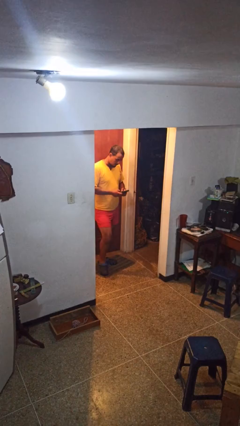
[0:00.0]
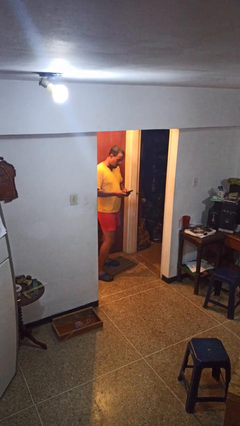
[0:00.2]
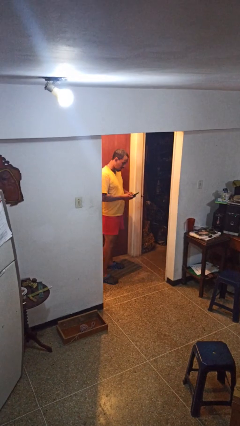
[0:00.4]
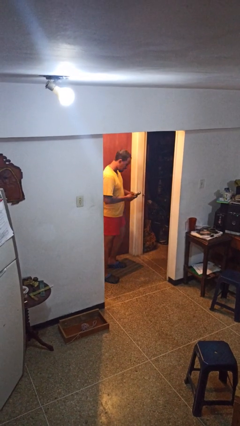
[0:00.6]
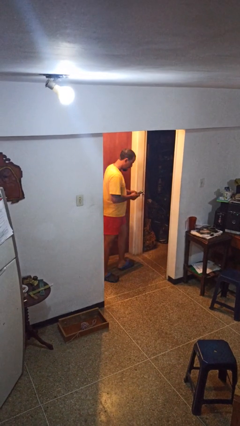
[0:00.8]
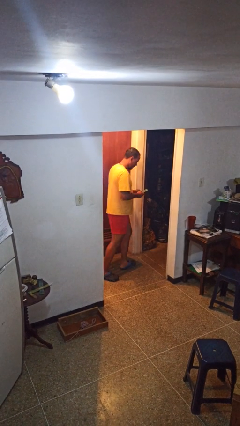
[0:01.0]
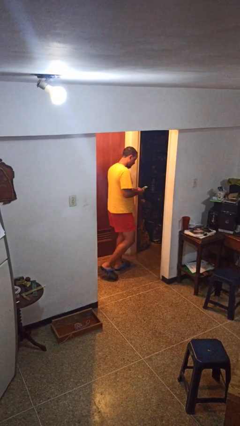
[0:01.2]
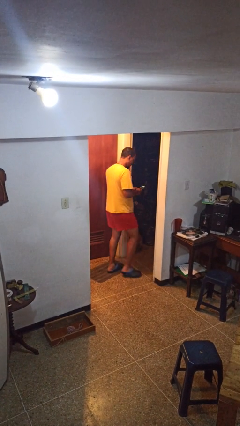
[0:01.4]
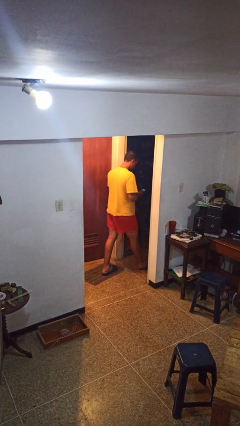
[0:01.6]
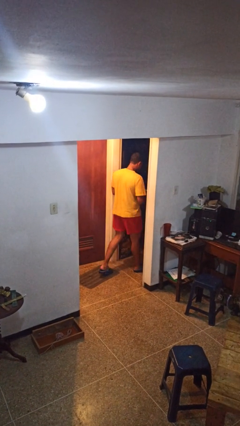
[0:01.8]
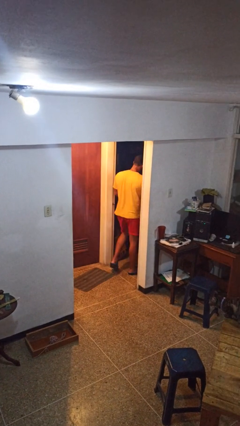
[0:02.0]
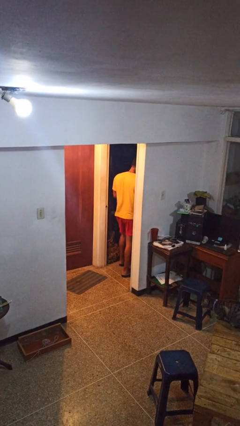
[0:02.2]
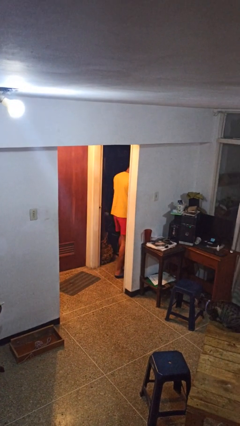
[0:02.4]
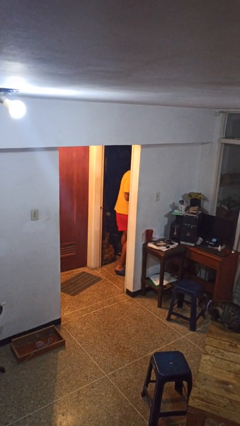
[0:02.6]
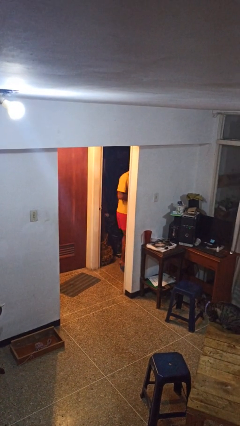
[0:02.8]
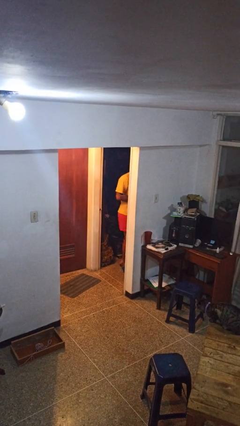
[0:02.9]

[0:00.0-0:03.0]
person exits scene through structure

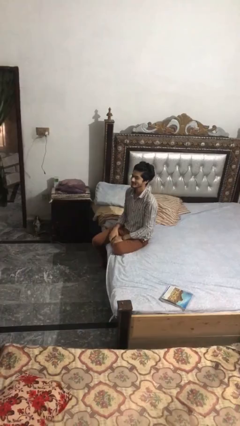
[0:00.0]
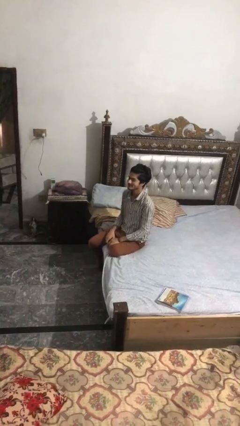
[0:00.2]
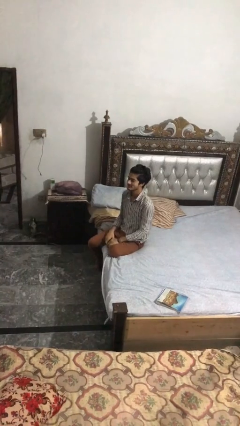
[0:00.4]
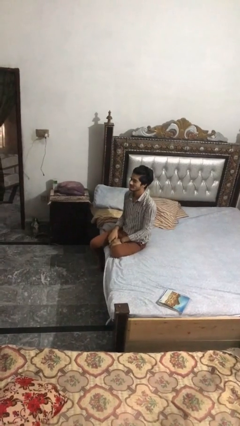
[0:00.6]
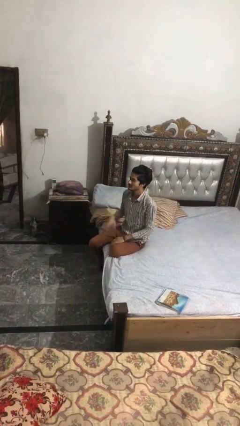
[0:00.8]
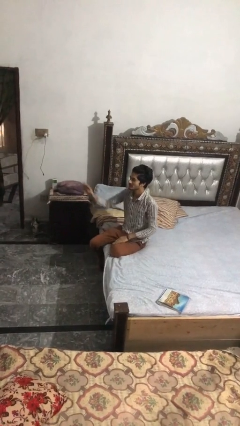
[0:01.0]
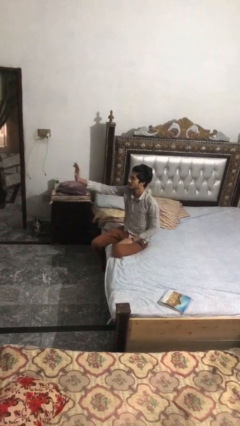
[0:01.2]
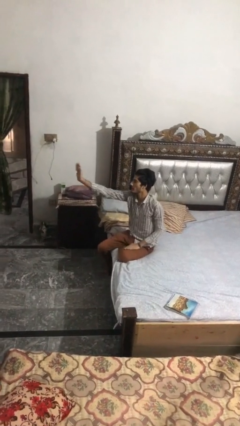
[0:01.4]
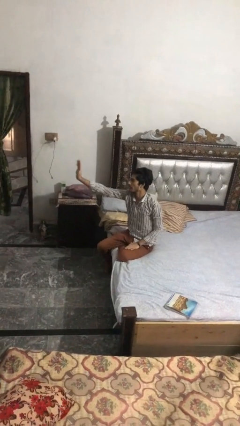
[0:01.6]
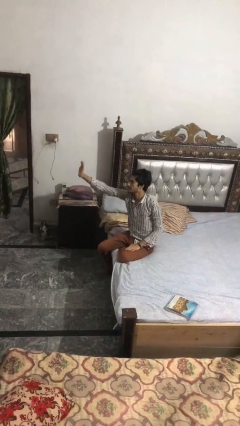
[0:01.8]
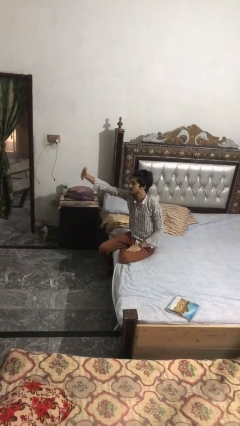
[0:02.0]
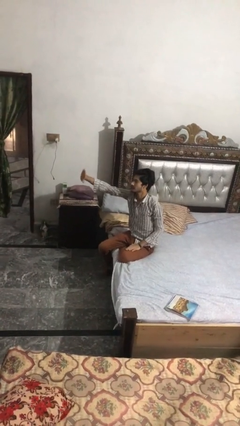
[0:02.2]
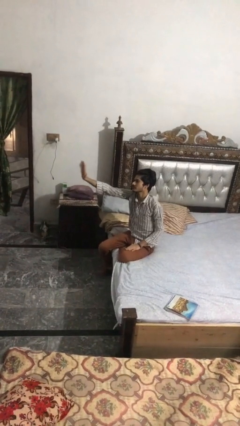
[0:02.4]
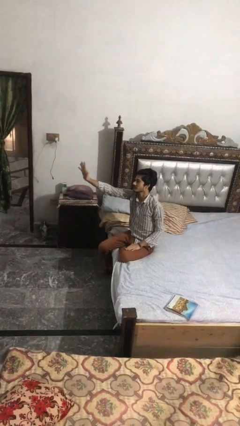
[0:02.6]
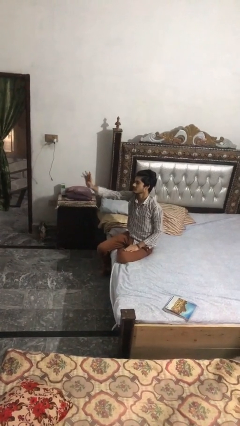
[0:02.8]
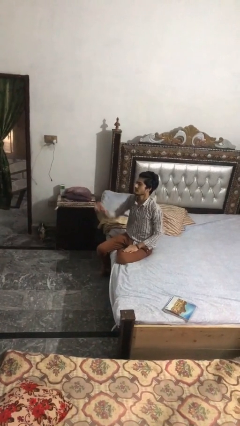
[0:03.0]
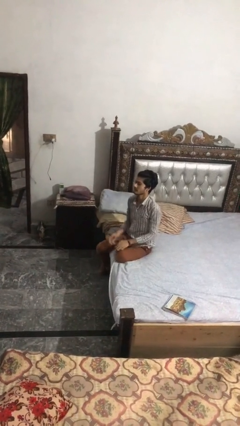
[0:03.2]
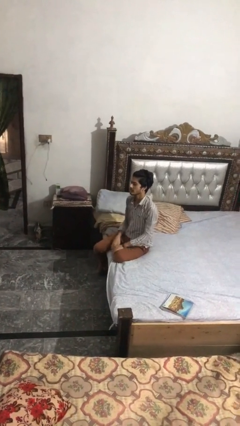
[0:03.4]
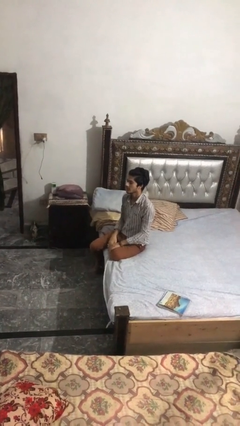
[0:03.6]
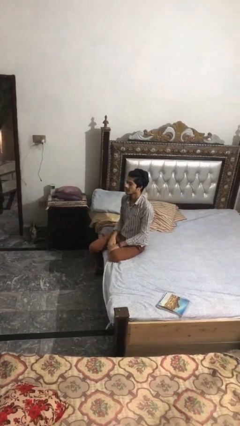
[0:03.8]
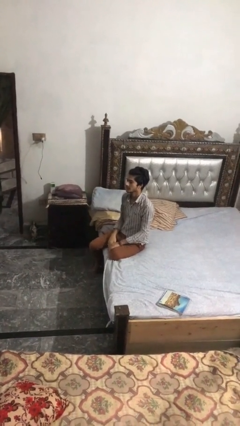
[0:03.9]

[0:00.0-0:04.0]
person waves at person

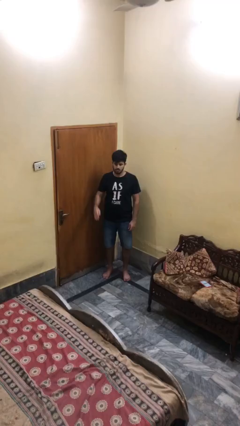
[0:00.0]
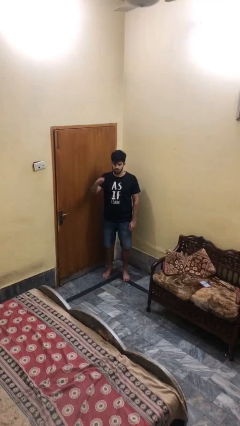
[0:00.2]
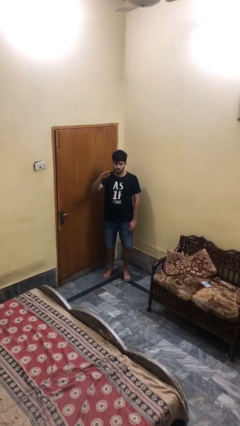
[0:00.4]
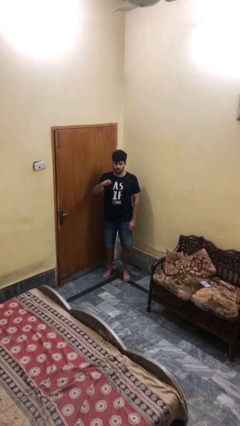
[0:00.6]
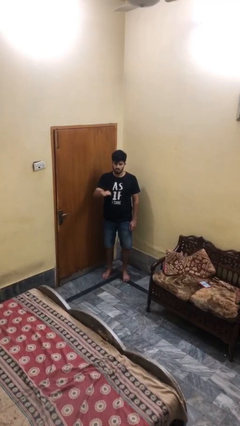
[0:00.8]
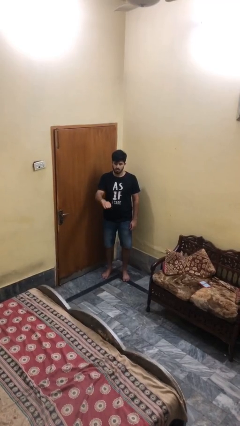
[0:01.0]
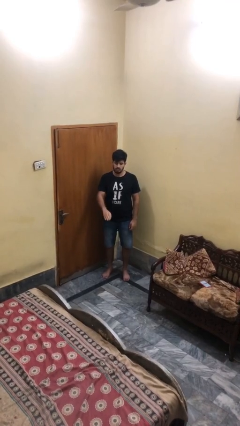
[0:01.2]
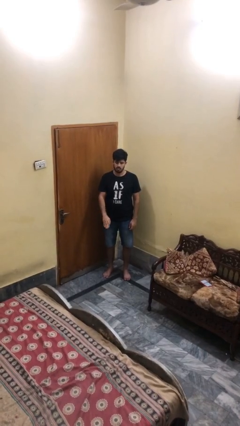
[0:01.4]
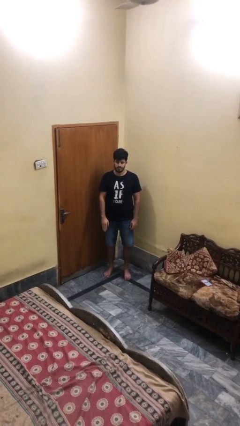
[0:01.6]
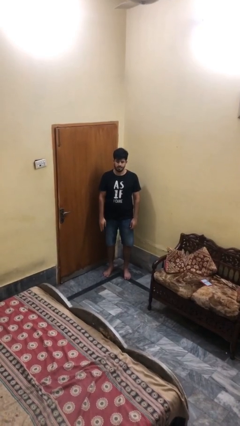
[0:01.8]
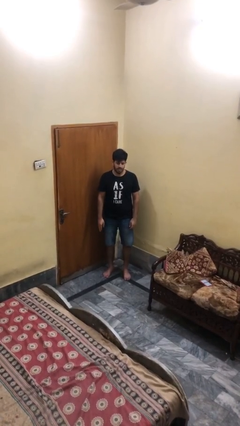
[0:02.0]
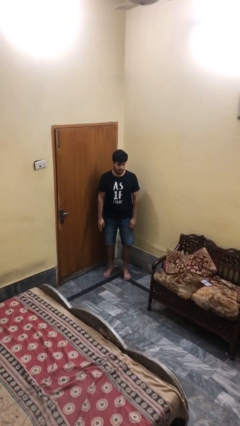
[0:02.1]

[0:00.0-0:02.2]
person gestures swipe down

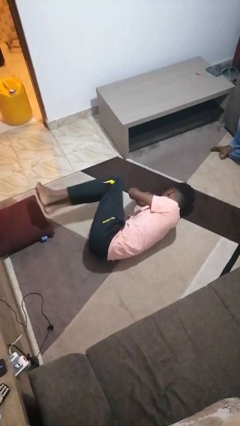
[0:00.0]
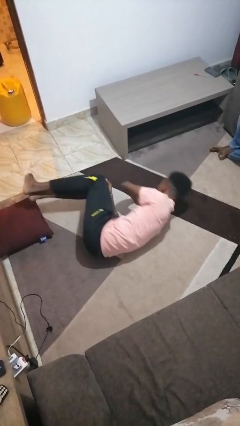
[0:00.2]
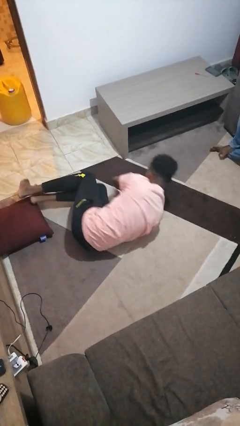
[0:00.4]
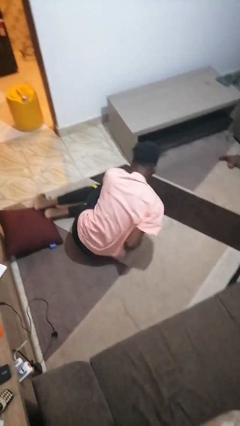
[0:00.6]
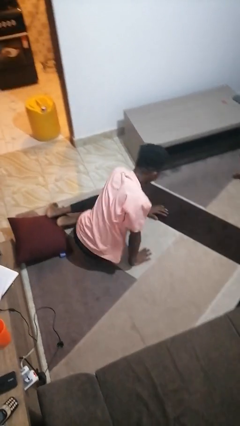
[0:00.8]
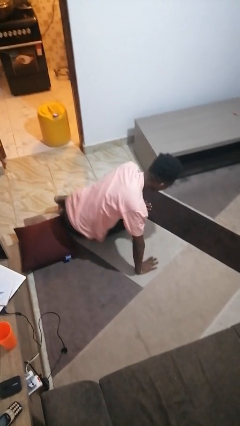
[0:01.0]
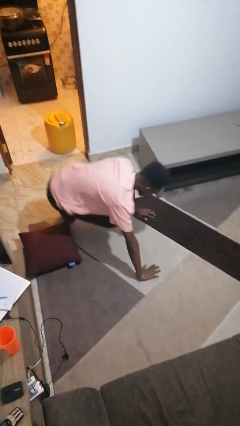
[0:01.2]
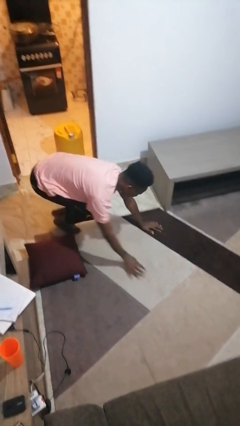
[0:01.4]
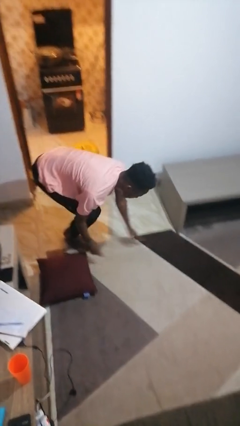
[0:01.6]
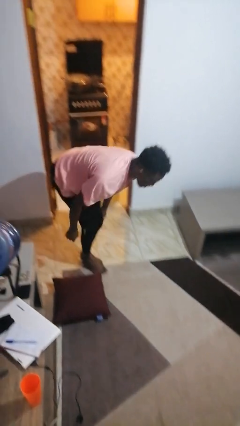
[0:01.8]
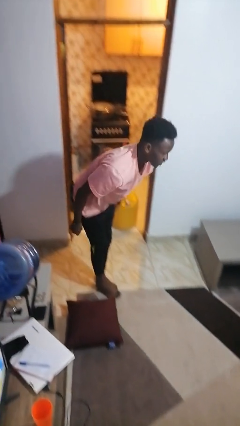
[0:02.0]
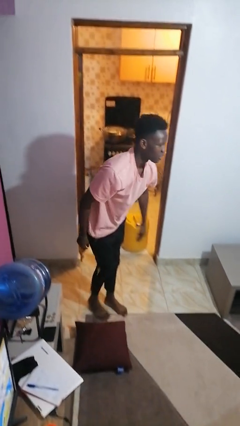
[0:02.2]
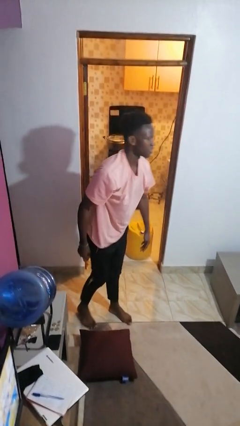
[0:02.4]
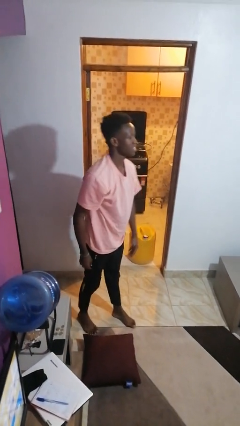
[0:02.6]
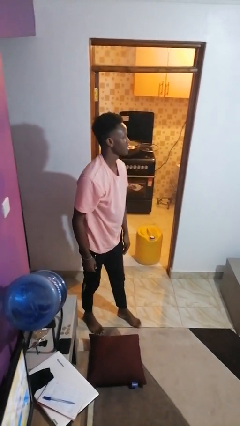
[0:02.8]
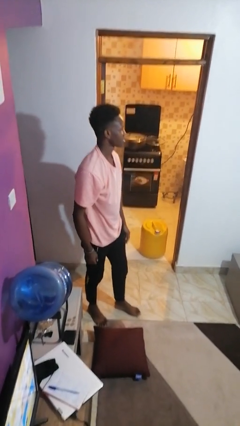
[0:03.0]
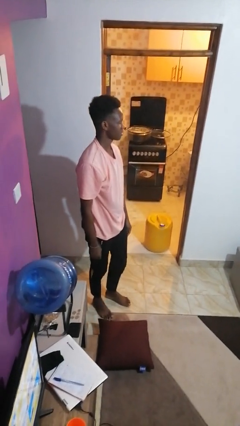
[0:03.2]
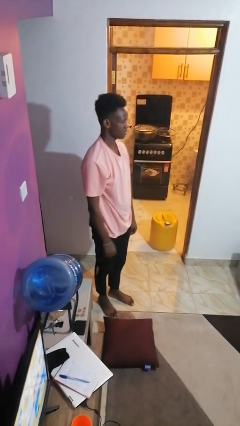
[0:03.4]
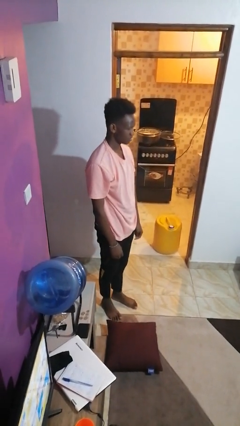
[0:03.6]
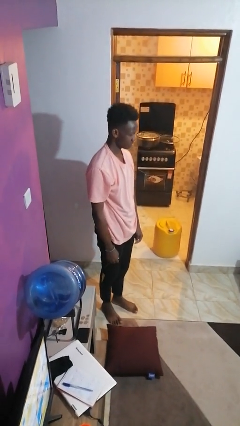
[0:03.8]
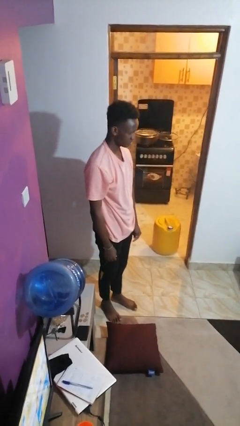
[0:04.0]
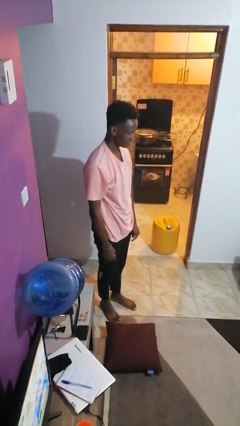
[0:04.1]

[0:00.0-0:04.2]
person stands up from floor

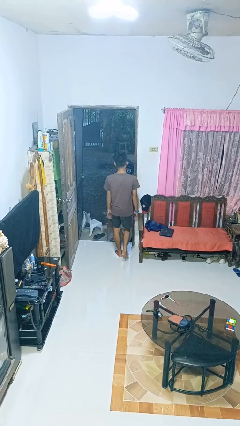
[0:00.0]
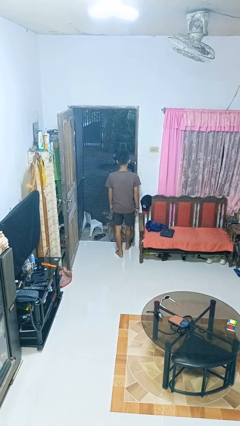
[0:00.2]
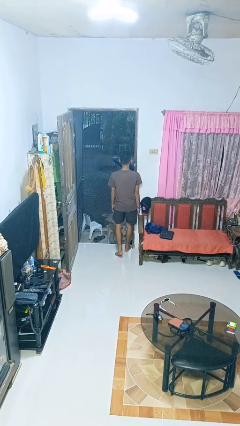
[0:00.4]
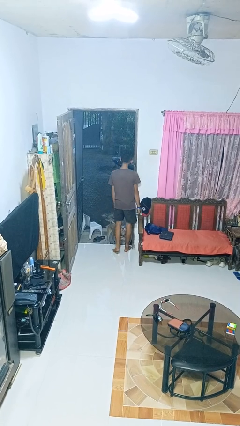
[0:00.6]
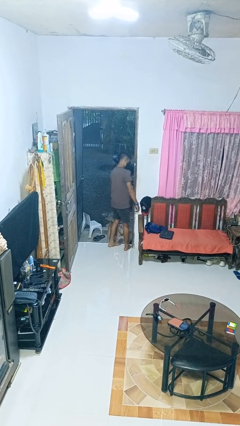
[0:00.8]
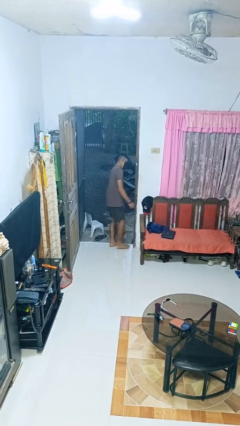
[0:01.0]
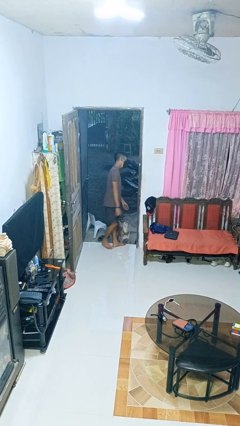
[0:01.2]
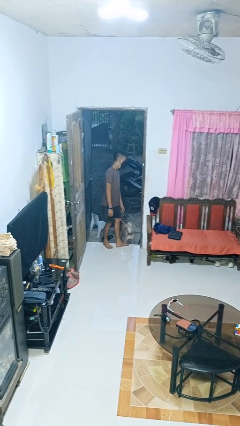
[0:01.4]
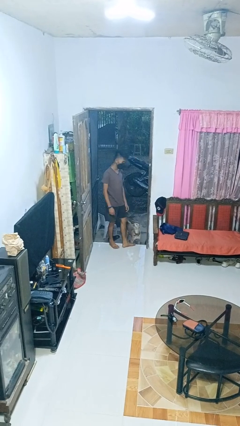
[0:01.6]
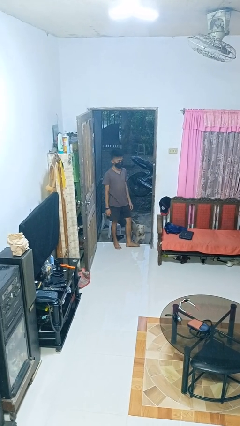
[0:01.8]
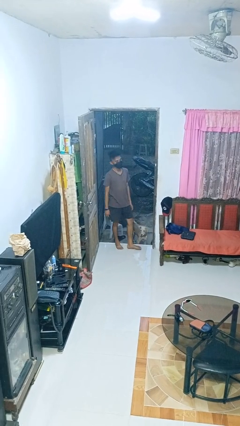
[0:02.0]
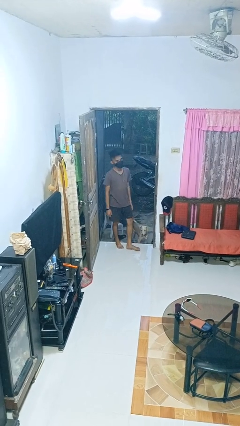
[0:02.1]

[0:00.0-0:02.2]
person bumps into wall

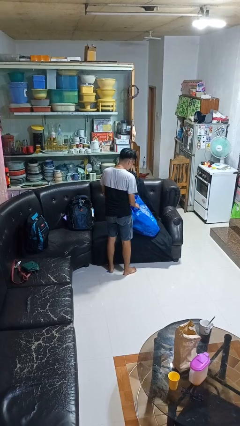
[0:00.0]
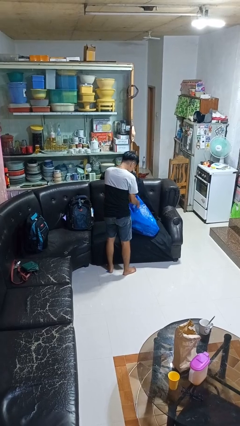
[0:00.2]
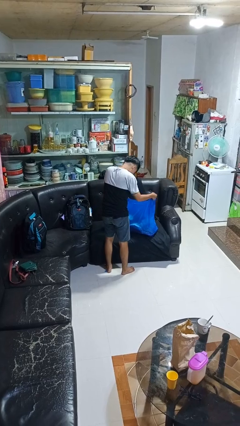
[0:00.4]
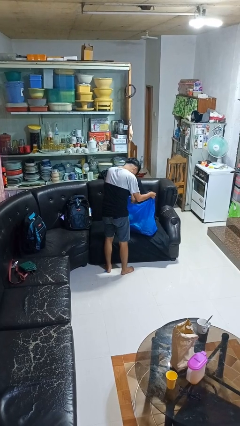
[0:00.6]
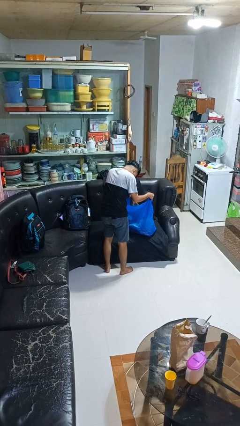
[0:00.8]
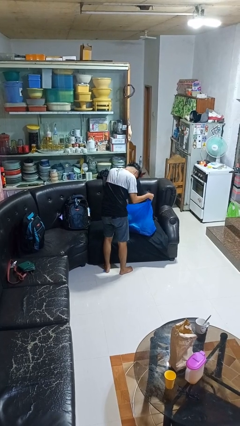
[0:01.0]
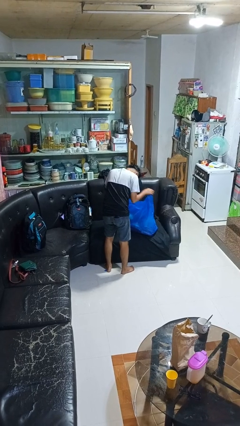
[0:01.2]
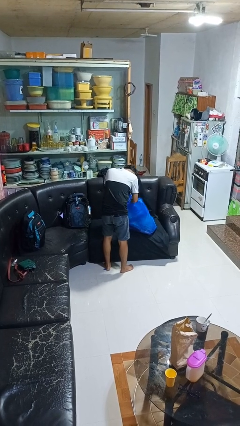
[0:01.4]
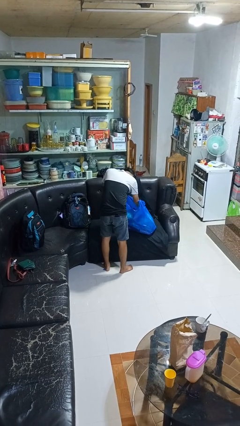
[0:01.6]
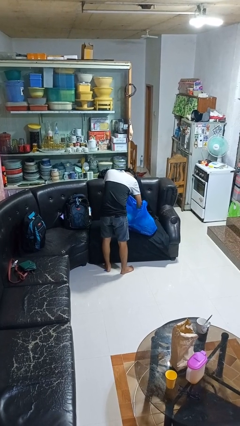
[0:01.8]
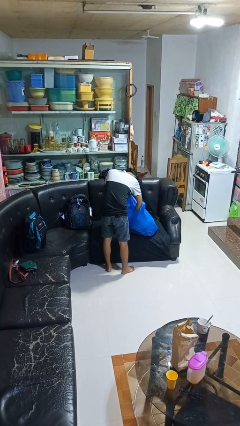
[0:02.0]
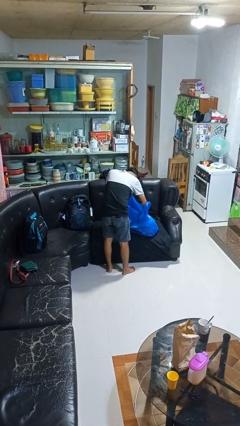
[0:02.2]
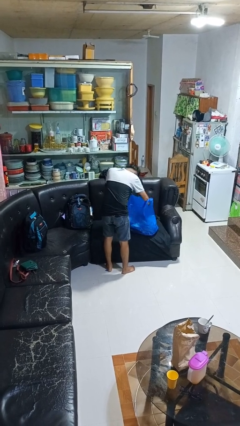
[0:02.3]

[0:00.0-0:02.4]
person searches in bag
